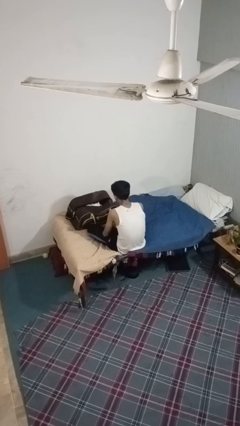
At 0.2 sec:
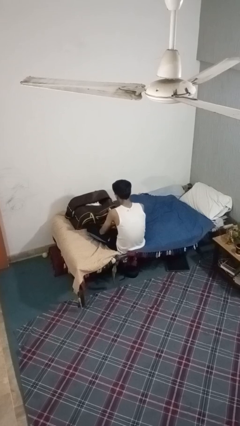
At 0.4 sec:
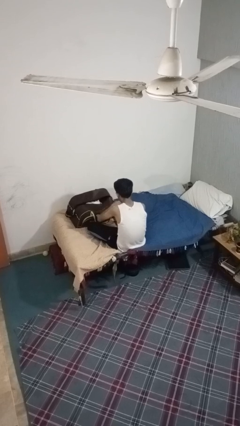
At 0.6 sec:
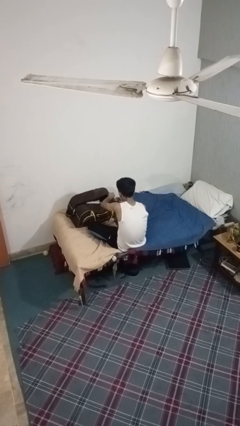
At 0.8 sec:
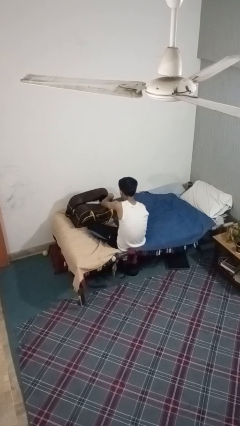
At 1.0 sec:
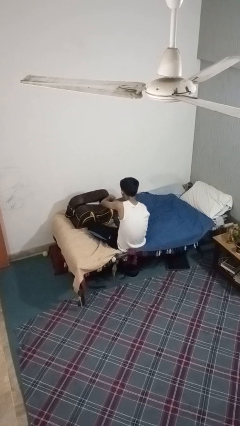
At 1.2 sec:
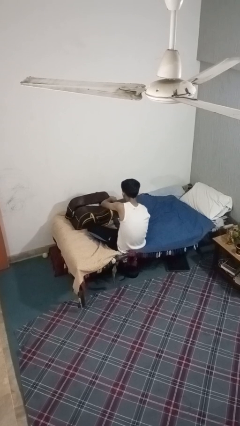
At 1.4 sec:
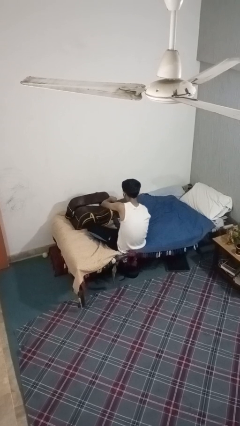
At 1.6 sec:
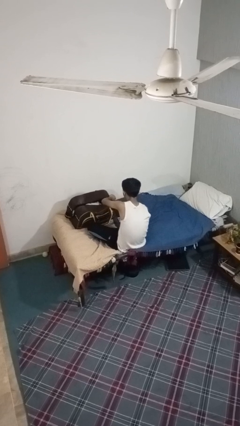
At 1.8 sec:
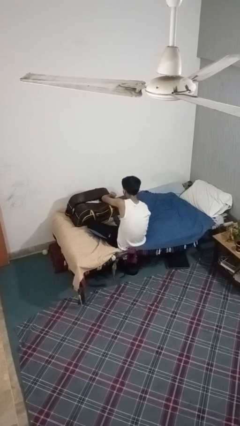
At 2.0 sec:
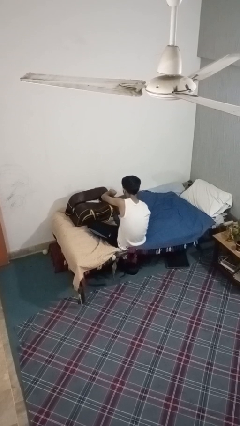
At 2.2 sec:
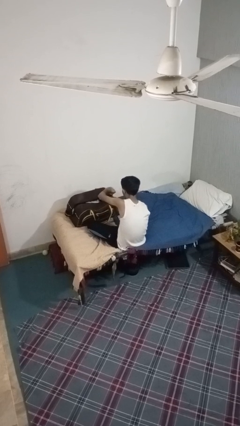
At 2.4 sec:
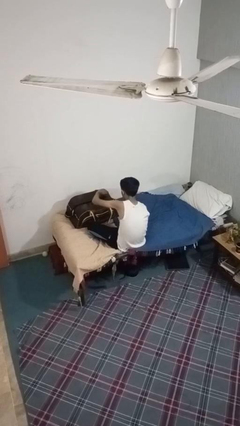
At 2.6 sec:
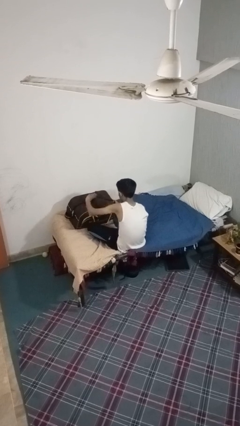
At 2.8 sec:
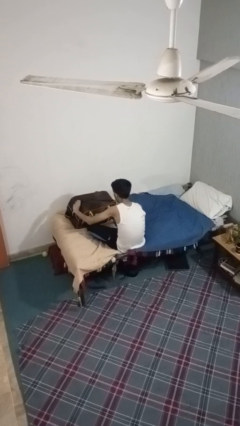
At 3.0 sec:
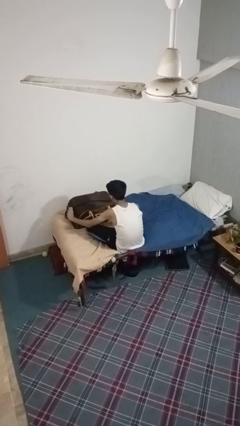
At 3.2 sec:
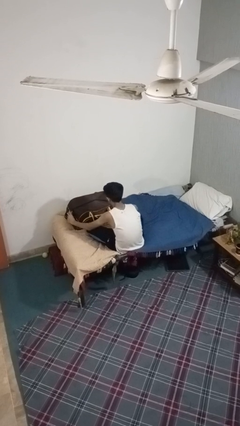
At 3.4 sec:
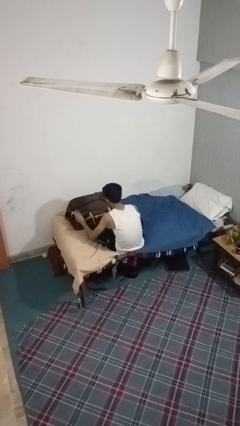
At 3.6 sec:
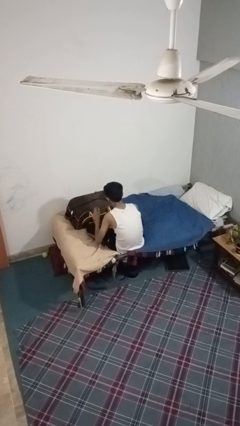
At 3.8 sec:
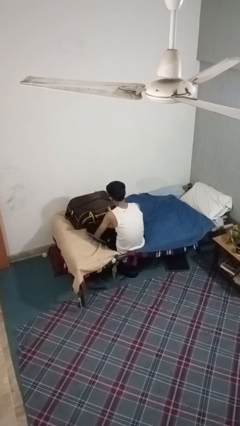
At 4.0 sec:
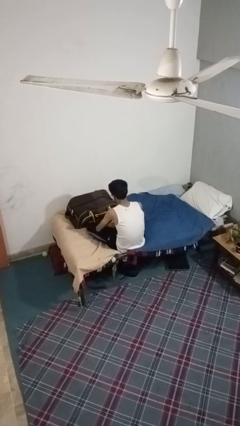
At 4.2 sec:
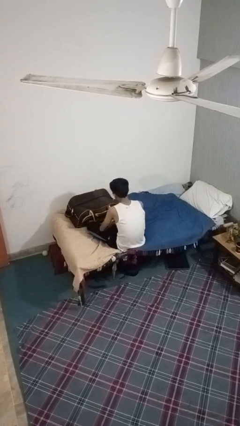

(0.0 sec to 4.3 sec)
person closes suitcase

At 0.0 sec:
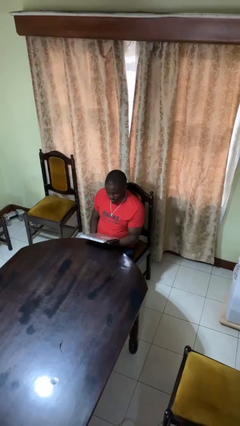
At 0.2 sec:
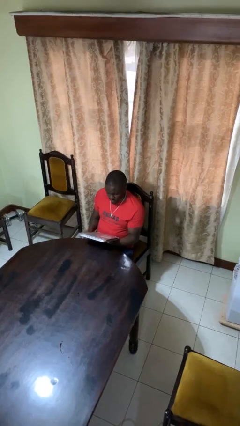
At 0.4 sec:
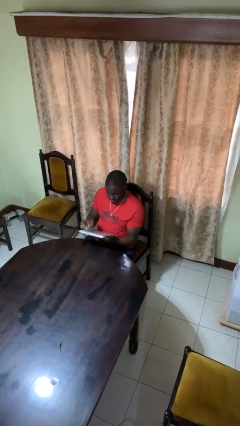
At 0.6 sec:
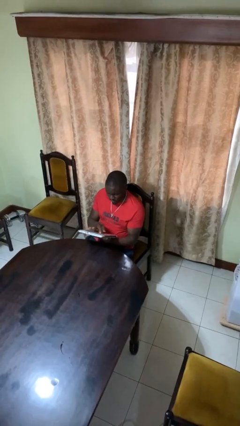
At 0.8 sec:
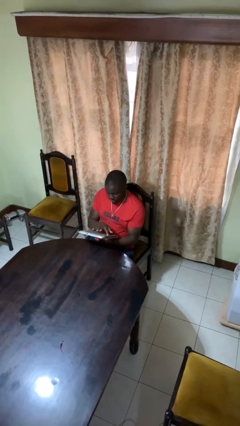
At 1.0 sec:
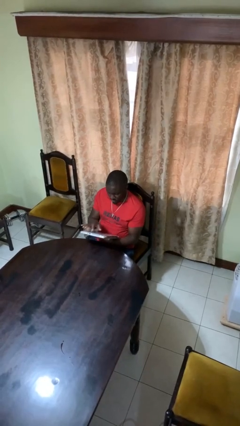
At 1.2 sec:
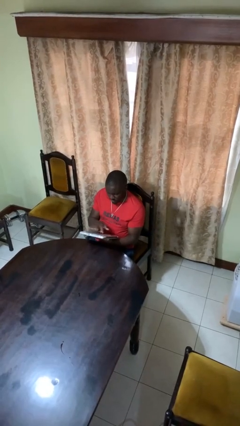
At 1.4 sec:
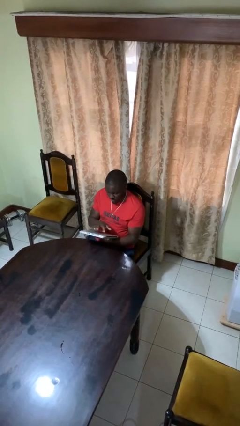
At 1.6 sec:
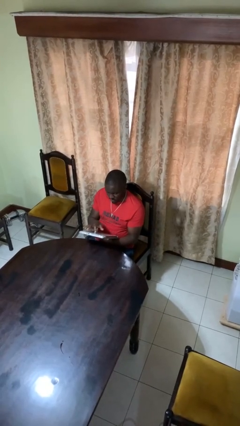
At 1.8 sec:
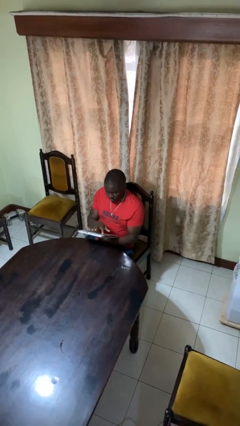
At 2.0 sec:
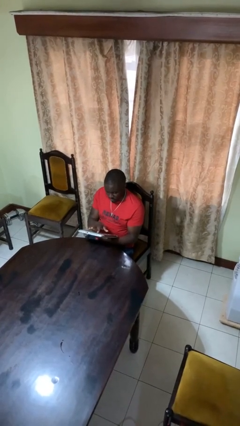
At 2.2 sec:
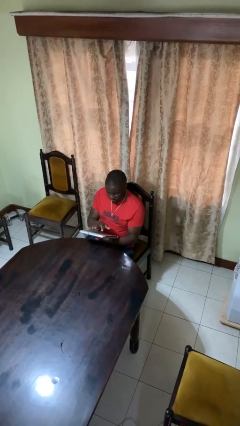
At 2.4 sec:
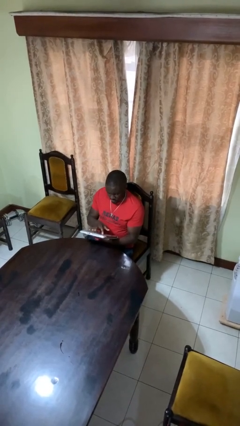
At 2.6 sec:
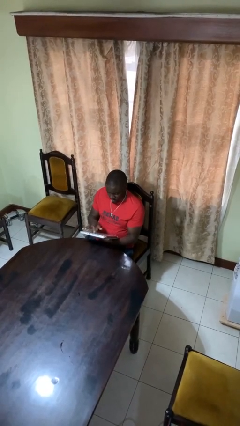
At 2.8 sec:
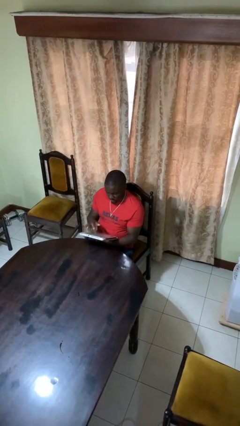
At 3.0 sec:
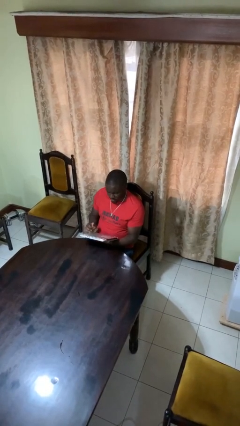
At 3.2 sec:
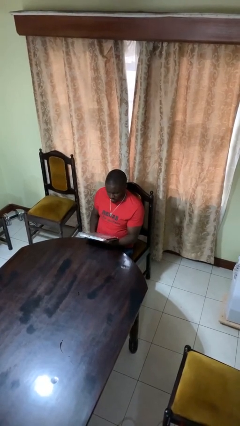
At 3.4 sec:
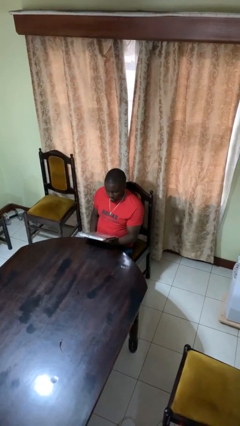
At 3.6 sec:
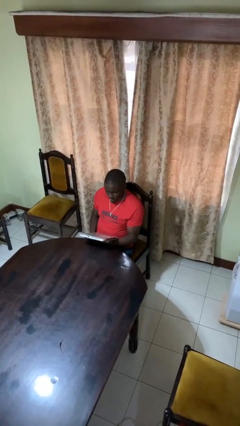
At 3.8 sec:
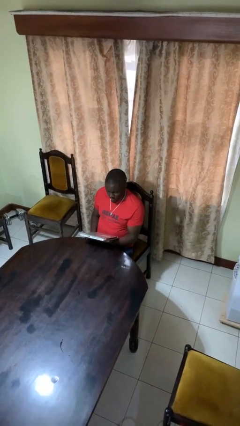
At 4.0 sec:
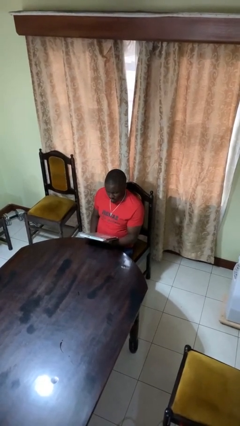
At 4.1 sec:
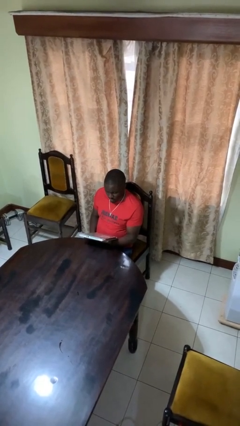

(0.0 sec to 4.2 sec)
person interacts with tablet

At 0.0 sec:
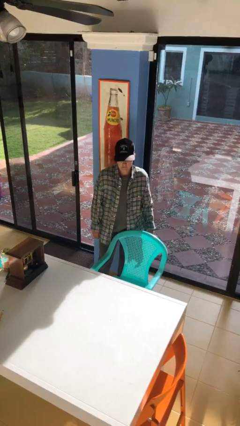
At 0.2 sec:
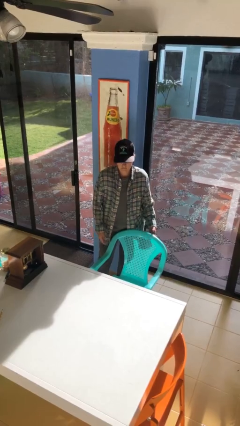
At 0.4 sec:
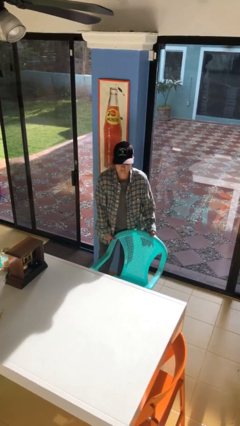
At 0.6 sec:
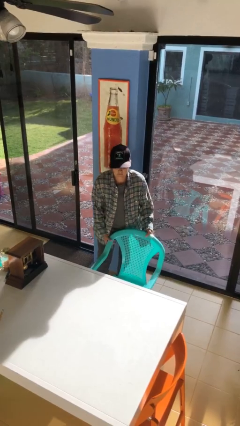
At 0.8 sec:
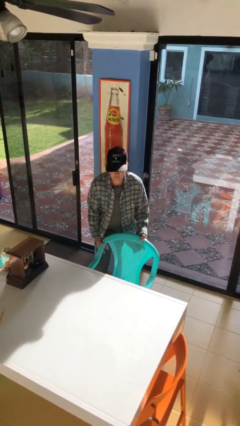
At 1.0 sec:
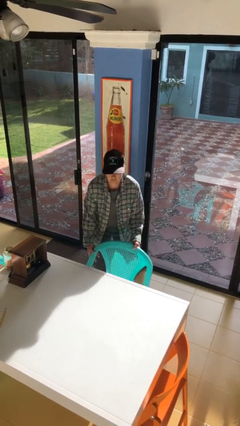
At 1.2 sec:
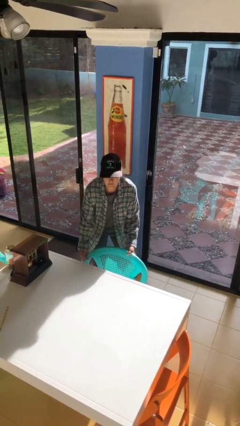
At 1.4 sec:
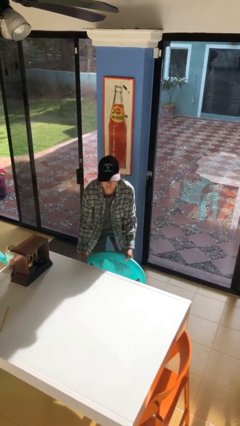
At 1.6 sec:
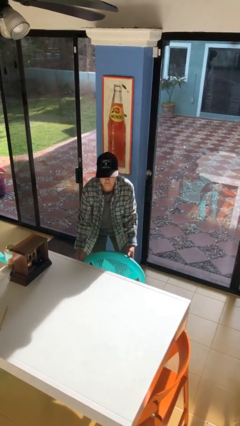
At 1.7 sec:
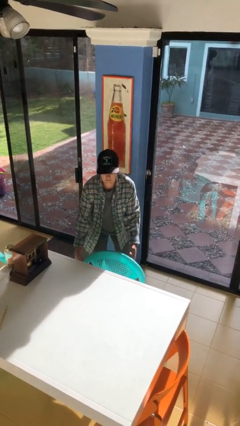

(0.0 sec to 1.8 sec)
person pushes in chair

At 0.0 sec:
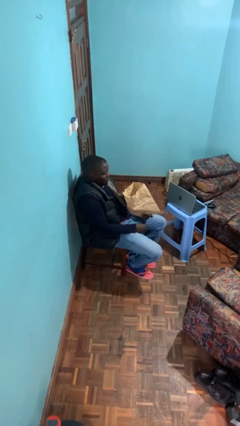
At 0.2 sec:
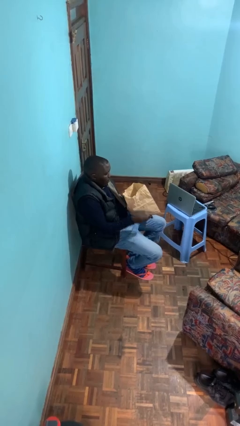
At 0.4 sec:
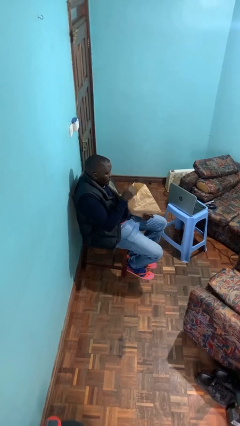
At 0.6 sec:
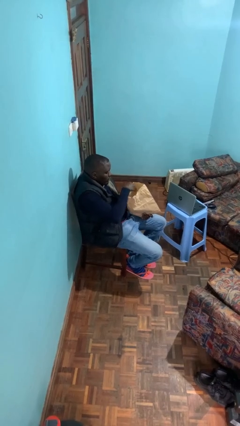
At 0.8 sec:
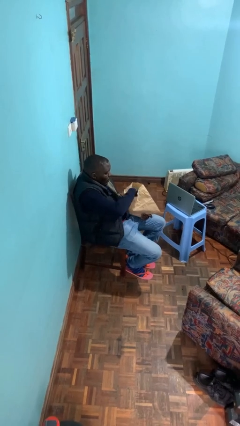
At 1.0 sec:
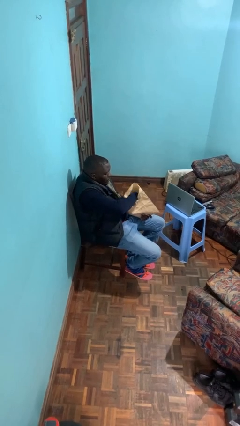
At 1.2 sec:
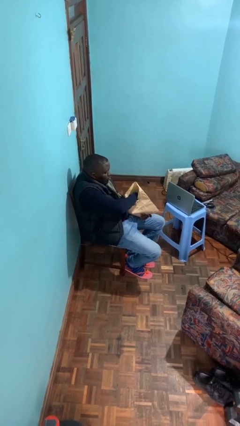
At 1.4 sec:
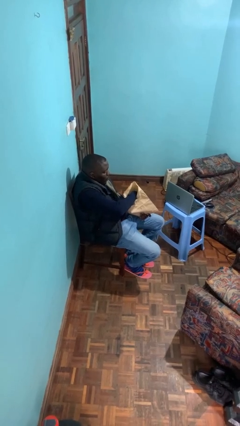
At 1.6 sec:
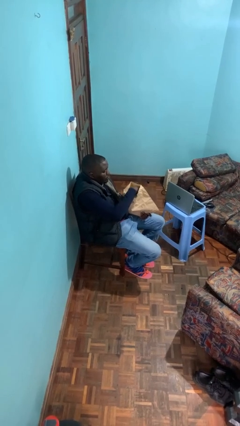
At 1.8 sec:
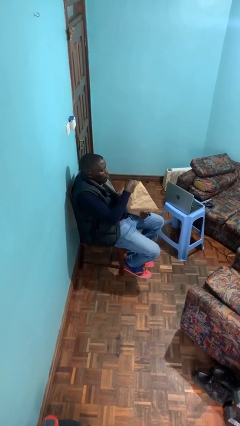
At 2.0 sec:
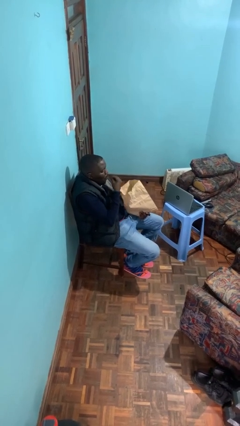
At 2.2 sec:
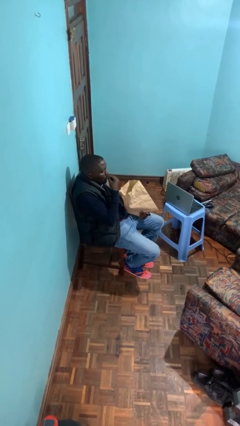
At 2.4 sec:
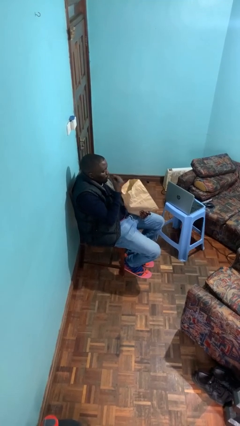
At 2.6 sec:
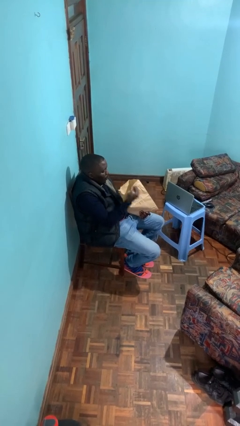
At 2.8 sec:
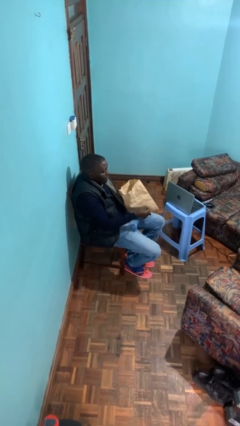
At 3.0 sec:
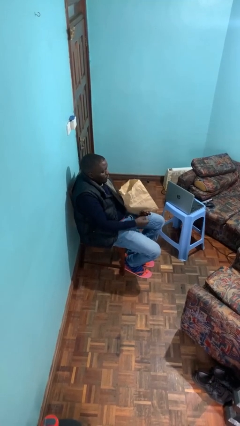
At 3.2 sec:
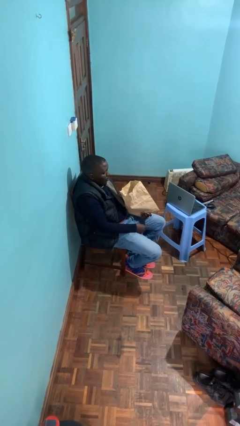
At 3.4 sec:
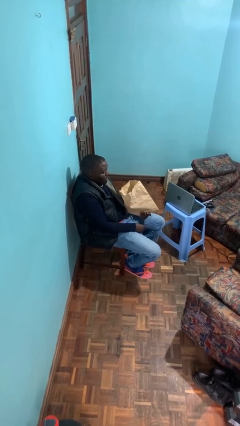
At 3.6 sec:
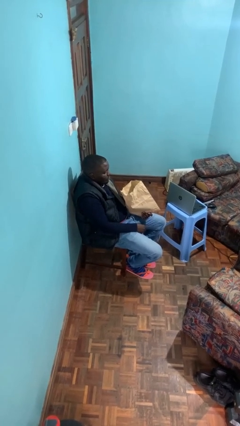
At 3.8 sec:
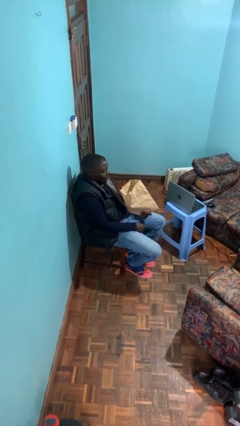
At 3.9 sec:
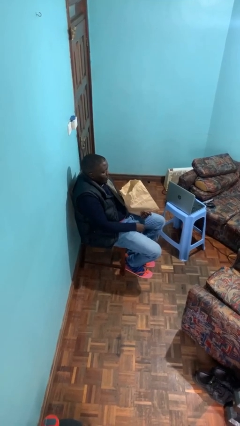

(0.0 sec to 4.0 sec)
person eats snack from bag

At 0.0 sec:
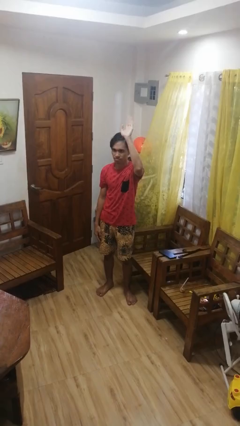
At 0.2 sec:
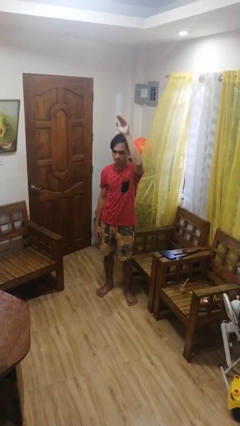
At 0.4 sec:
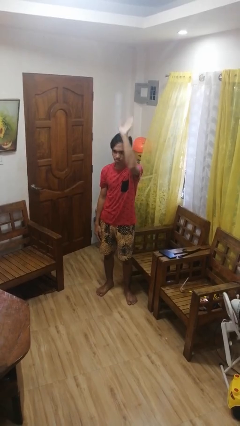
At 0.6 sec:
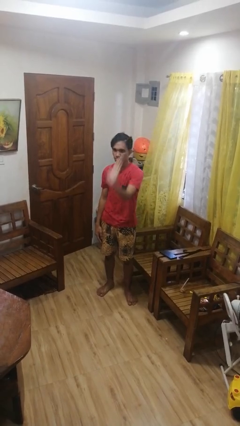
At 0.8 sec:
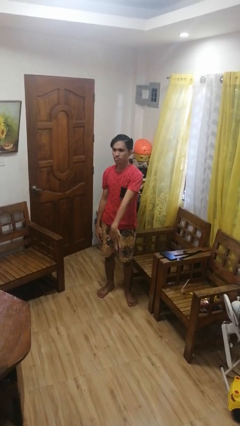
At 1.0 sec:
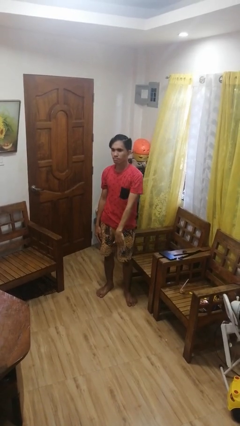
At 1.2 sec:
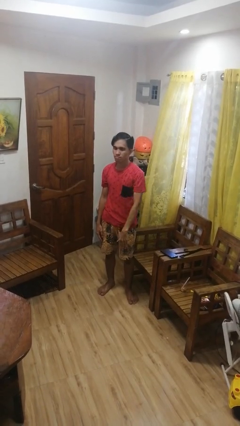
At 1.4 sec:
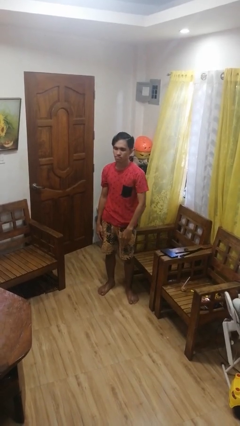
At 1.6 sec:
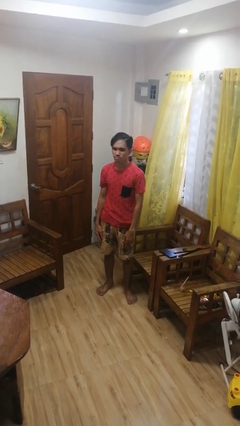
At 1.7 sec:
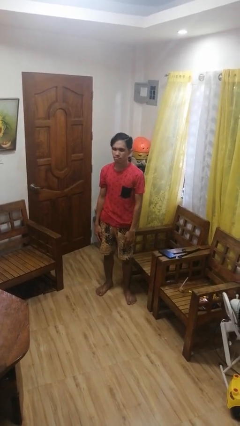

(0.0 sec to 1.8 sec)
person gestures swipe down

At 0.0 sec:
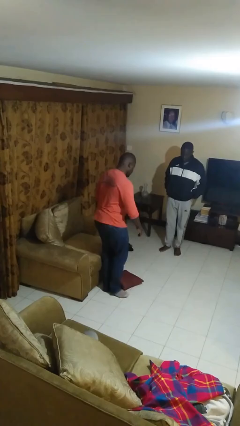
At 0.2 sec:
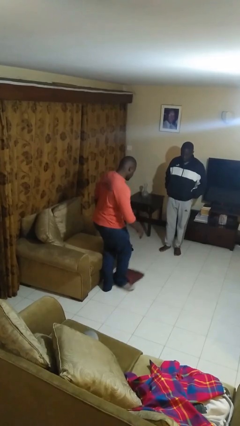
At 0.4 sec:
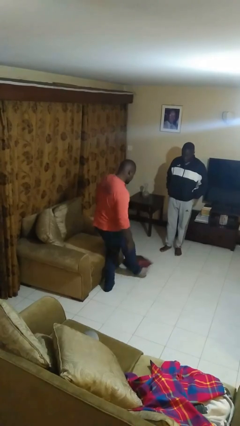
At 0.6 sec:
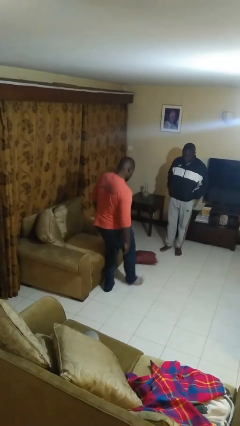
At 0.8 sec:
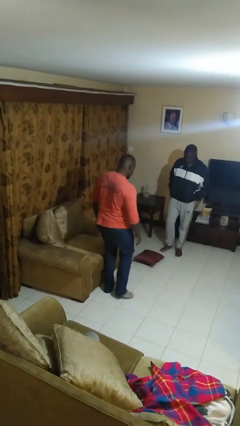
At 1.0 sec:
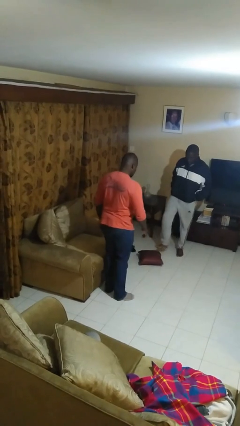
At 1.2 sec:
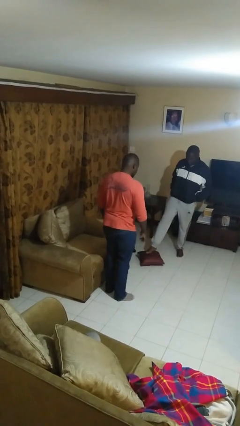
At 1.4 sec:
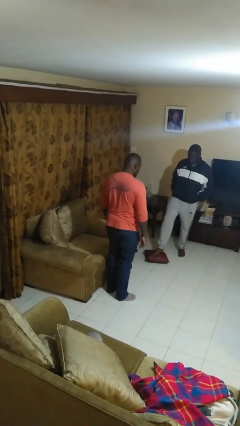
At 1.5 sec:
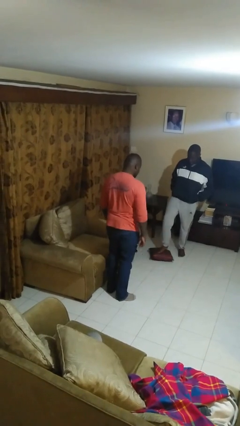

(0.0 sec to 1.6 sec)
person kicks object to person
